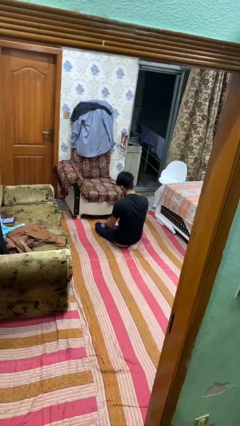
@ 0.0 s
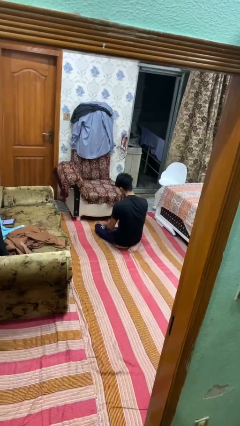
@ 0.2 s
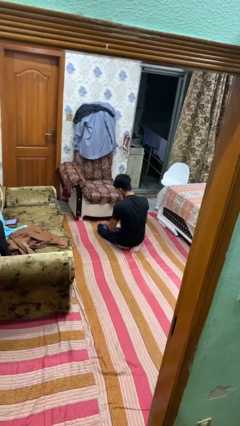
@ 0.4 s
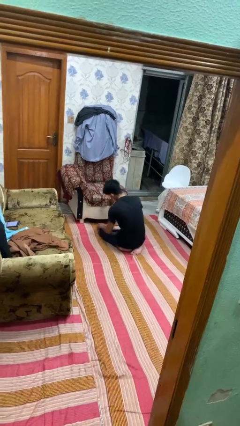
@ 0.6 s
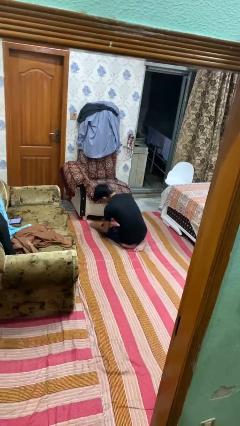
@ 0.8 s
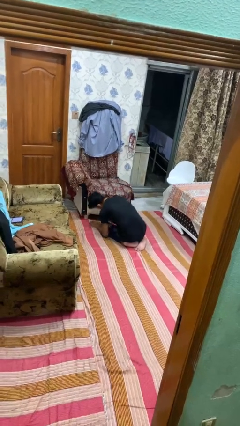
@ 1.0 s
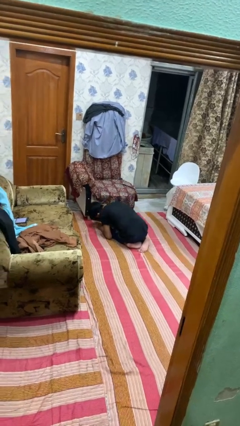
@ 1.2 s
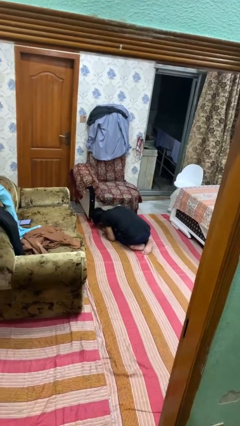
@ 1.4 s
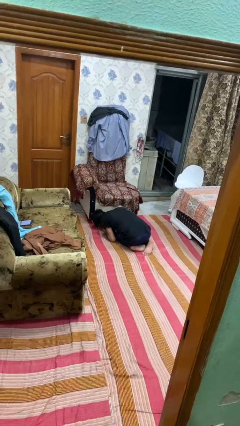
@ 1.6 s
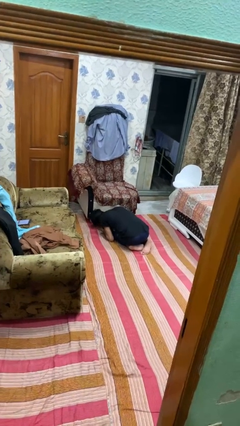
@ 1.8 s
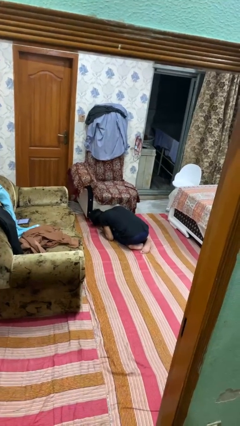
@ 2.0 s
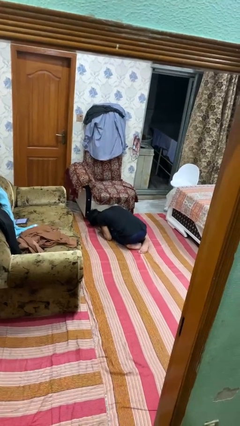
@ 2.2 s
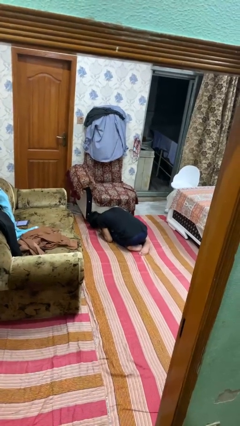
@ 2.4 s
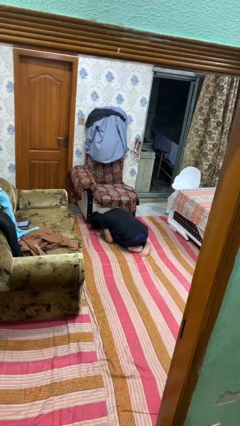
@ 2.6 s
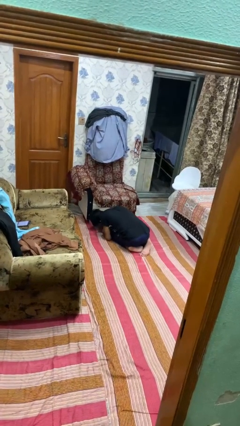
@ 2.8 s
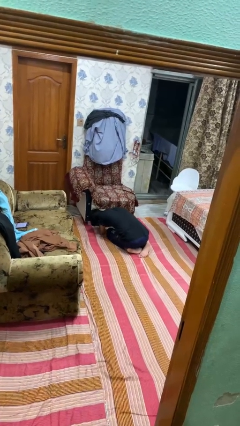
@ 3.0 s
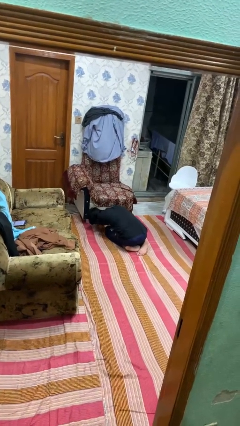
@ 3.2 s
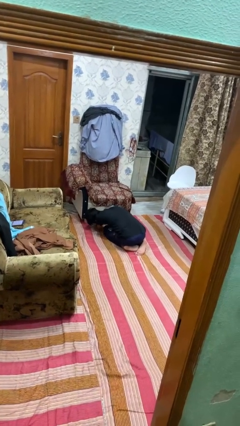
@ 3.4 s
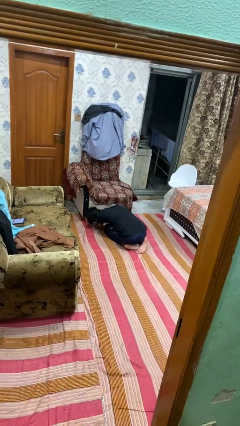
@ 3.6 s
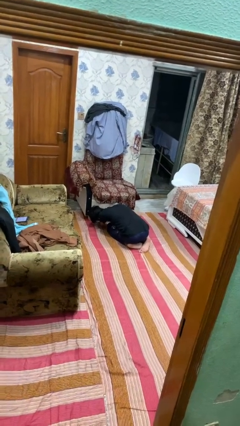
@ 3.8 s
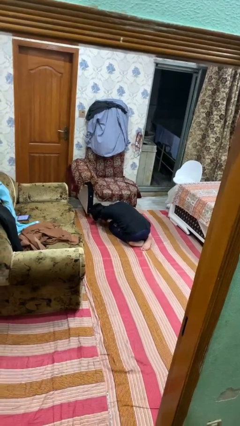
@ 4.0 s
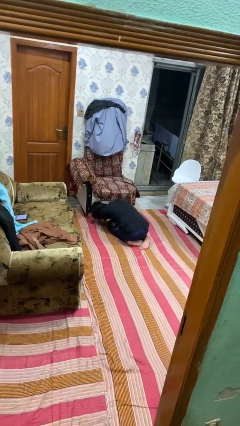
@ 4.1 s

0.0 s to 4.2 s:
person searches under couch

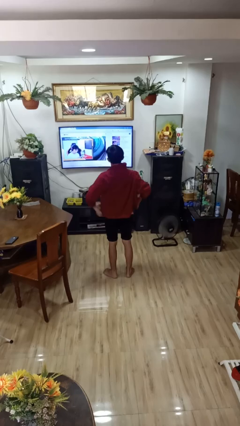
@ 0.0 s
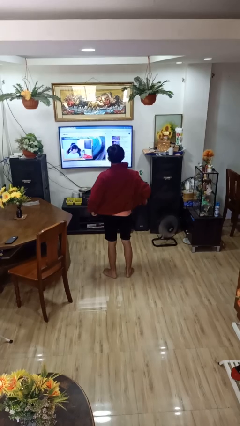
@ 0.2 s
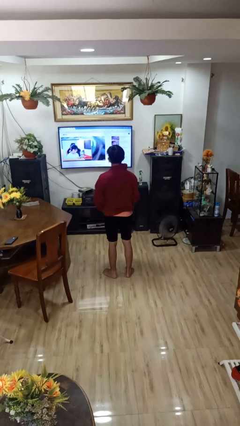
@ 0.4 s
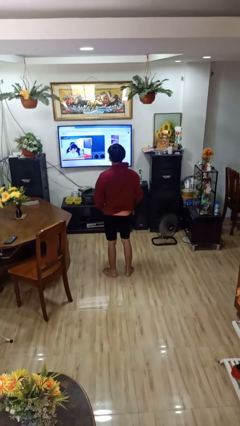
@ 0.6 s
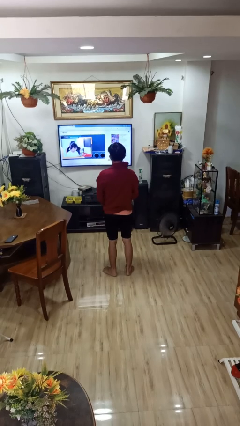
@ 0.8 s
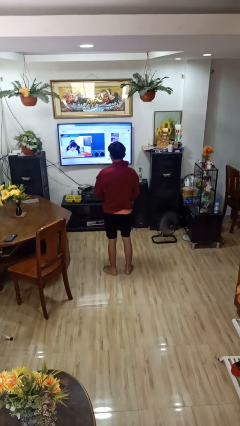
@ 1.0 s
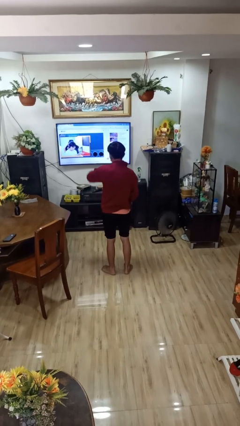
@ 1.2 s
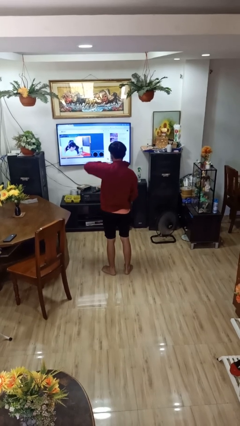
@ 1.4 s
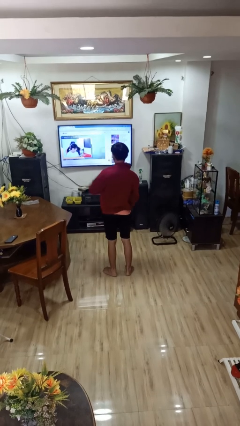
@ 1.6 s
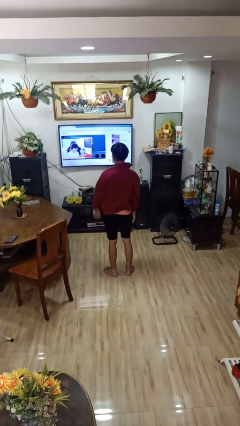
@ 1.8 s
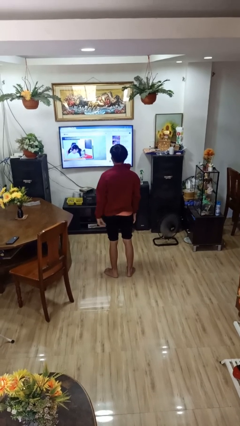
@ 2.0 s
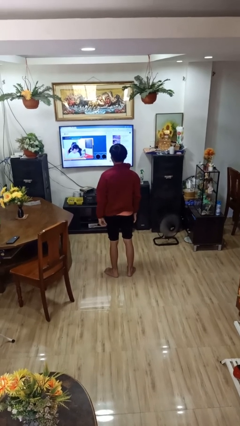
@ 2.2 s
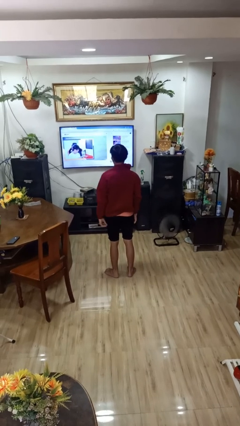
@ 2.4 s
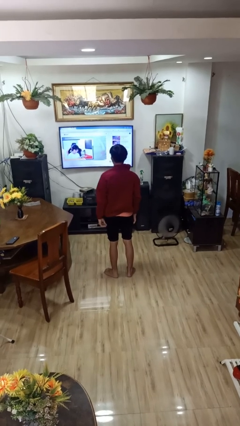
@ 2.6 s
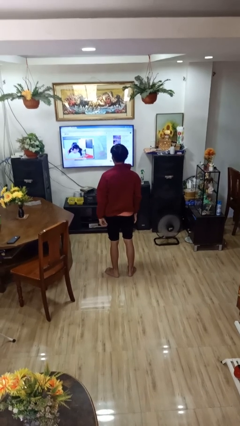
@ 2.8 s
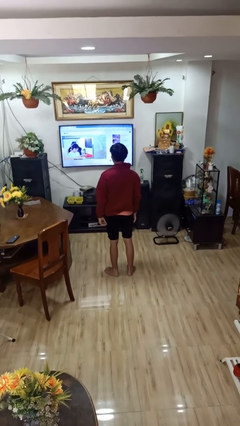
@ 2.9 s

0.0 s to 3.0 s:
person zips up jacket

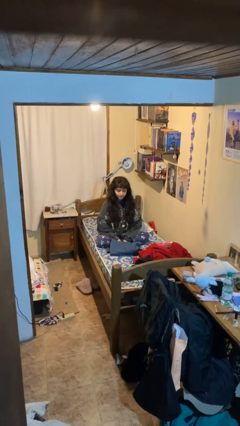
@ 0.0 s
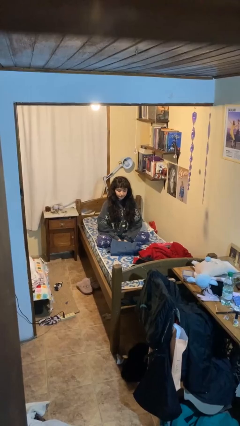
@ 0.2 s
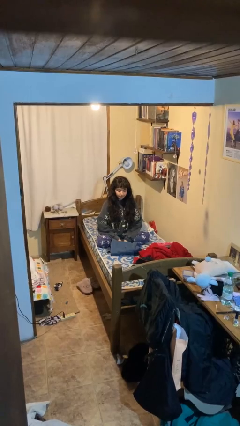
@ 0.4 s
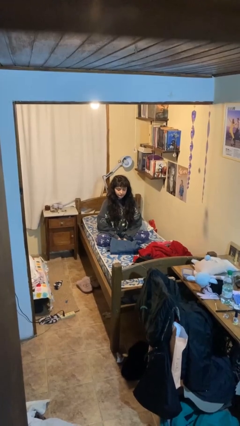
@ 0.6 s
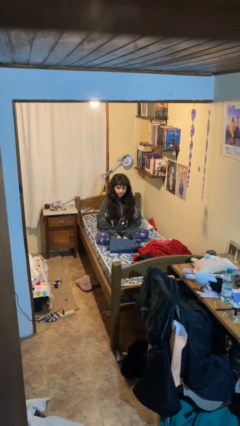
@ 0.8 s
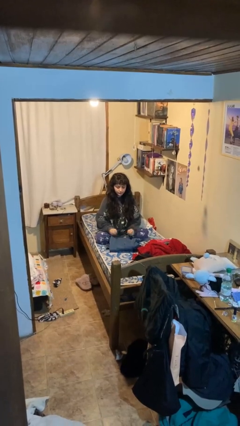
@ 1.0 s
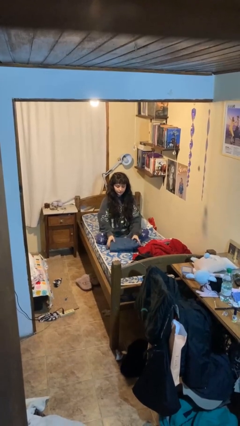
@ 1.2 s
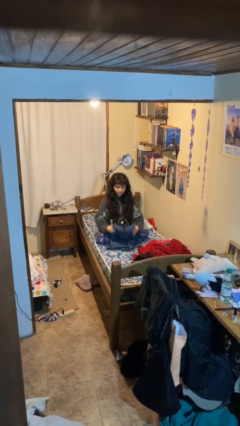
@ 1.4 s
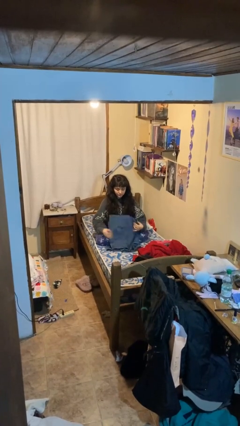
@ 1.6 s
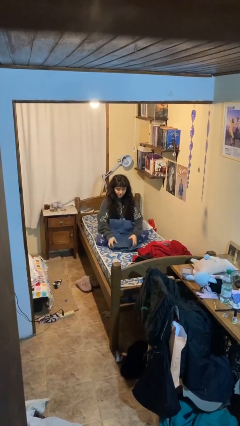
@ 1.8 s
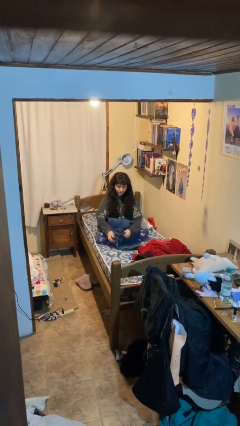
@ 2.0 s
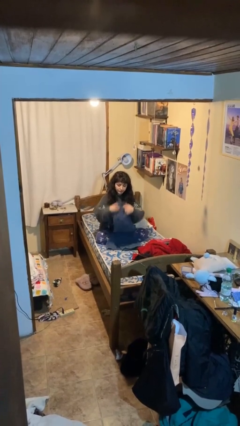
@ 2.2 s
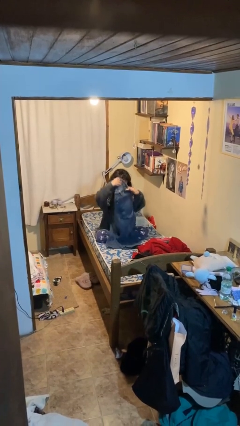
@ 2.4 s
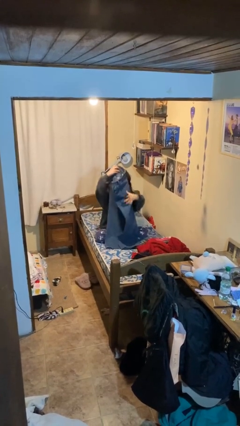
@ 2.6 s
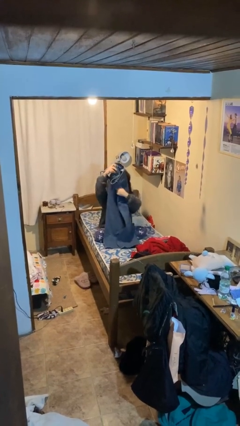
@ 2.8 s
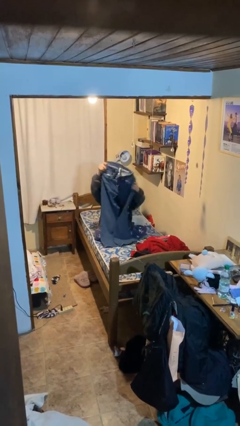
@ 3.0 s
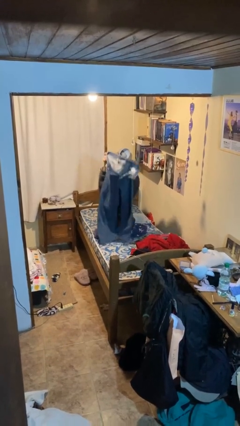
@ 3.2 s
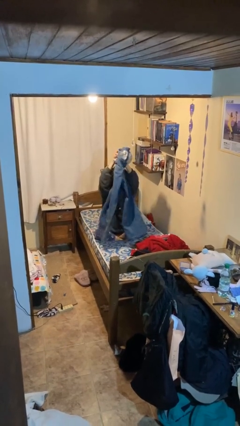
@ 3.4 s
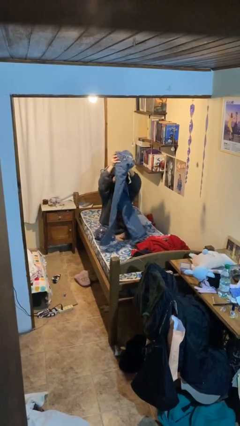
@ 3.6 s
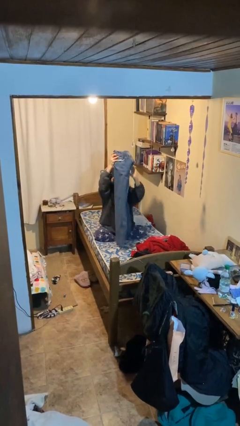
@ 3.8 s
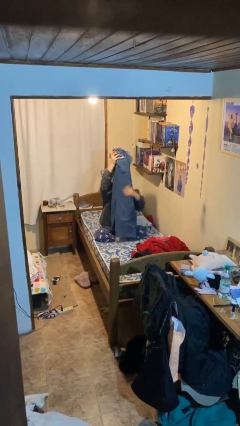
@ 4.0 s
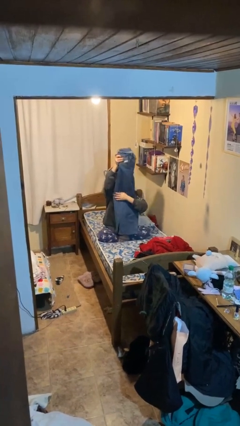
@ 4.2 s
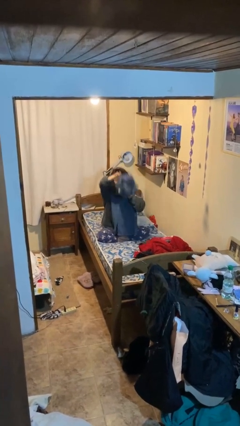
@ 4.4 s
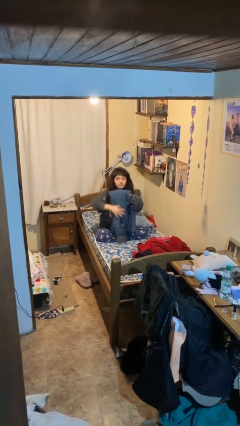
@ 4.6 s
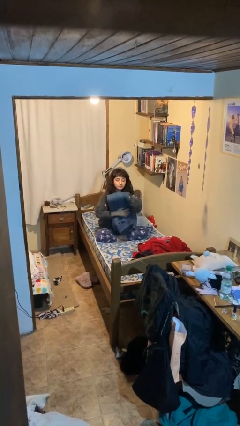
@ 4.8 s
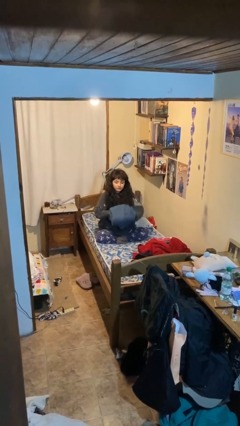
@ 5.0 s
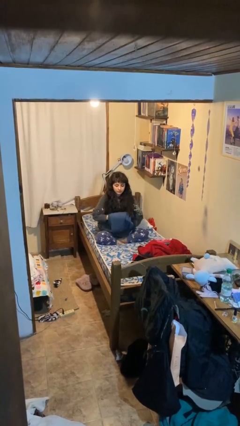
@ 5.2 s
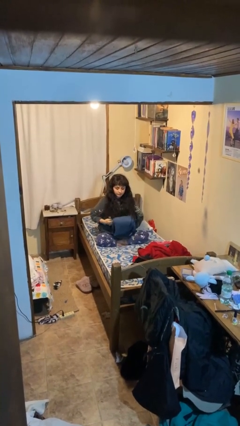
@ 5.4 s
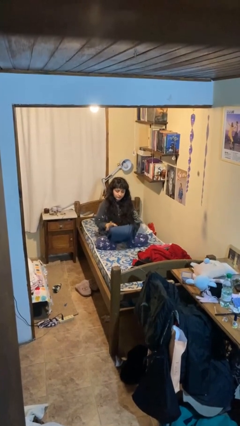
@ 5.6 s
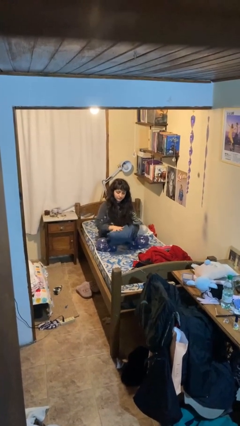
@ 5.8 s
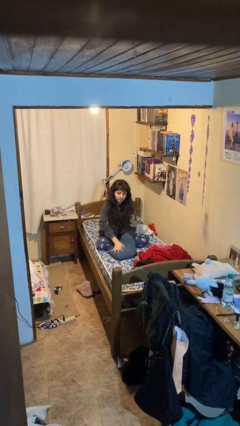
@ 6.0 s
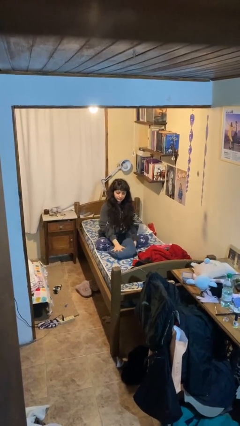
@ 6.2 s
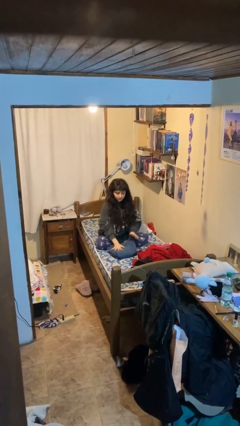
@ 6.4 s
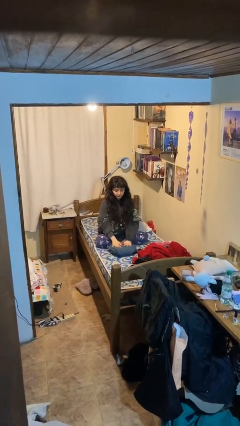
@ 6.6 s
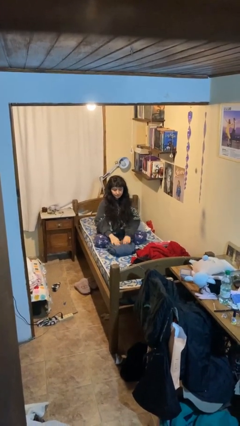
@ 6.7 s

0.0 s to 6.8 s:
person folds pants

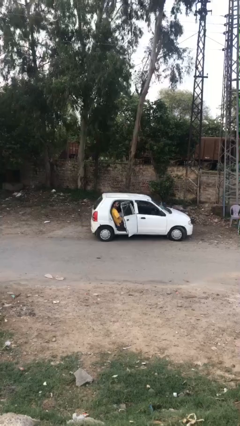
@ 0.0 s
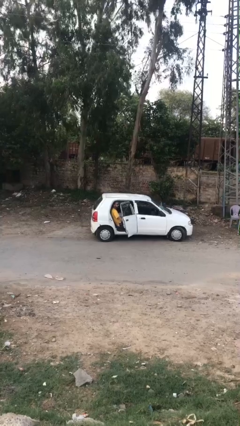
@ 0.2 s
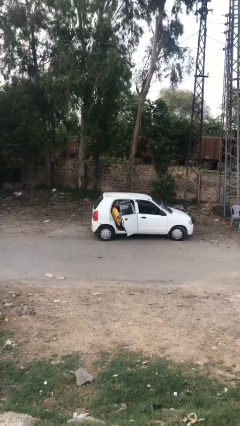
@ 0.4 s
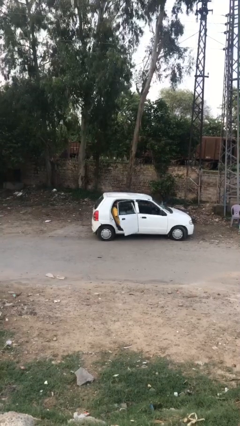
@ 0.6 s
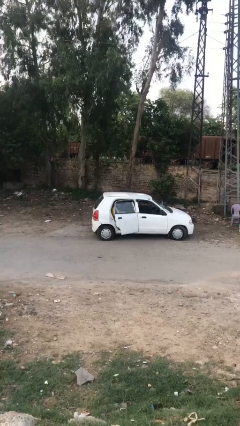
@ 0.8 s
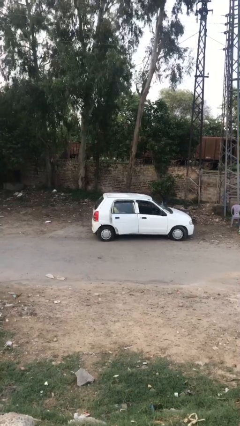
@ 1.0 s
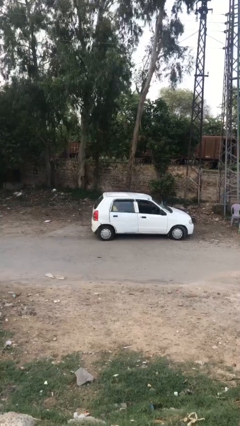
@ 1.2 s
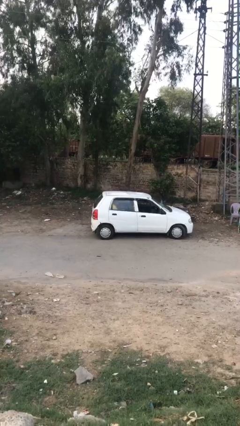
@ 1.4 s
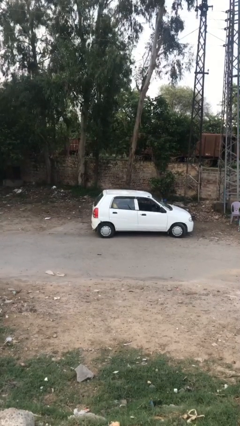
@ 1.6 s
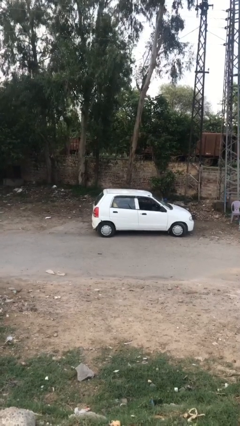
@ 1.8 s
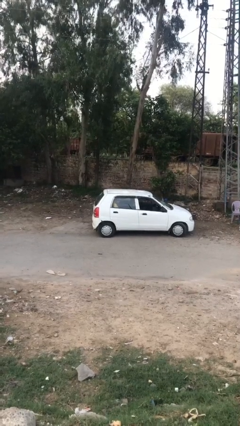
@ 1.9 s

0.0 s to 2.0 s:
person closes car door

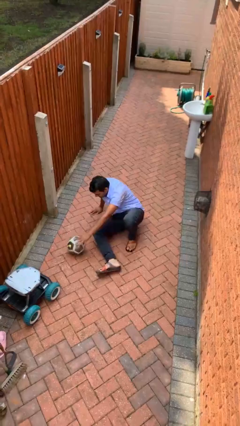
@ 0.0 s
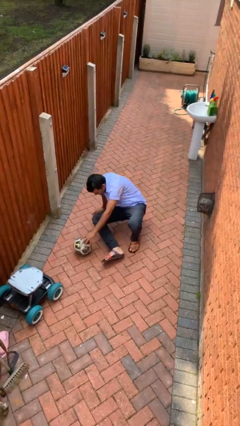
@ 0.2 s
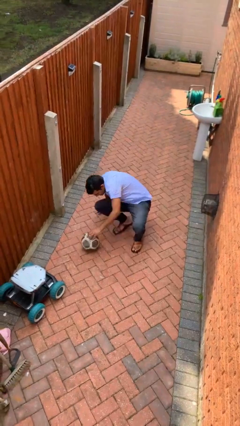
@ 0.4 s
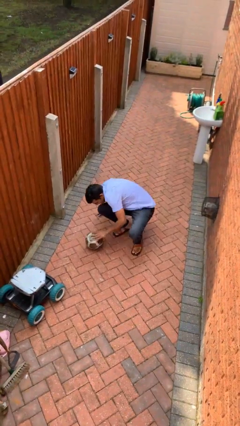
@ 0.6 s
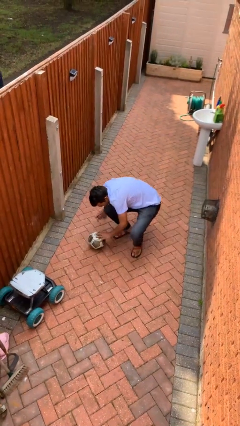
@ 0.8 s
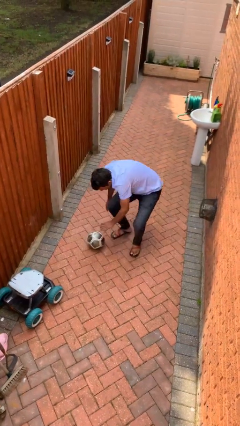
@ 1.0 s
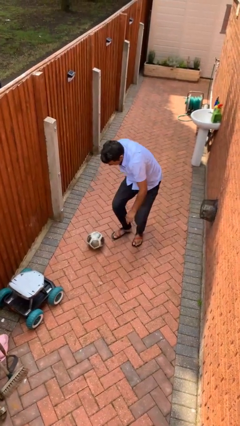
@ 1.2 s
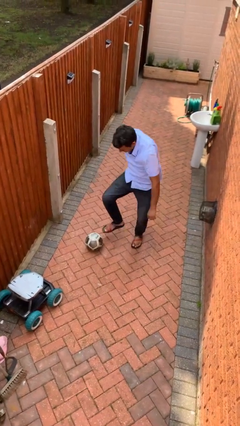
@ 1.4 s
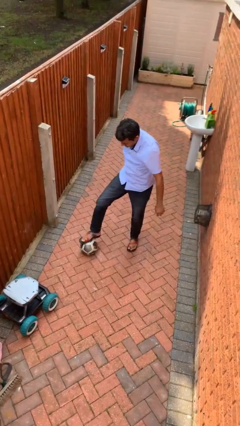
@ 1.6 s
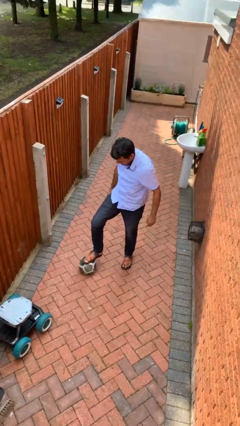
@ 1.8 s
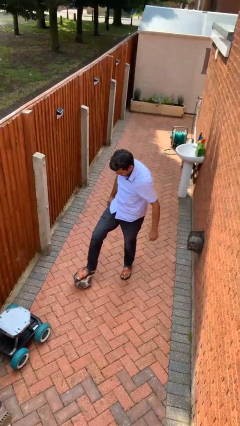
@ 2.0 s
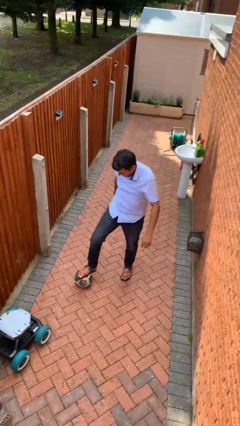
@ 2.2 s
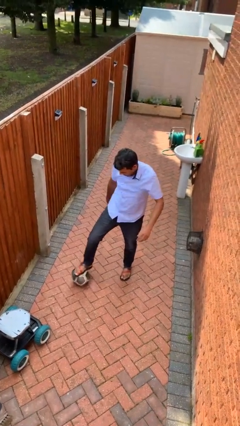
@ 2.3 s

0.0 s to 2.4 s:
person stands up from floor
